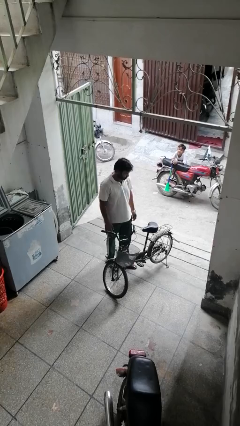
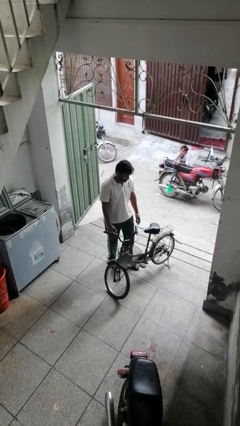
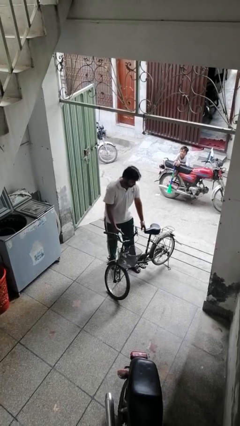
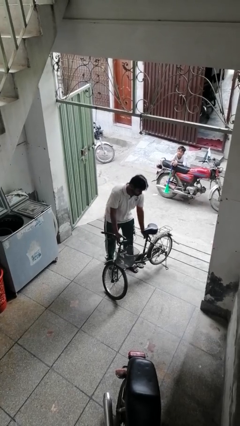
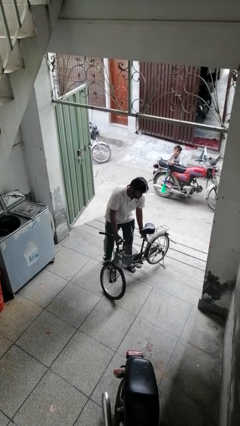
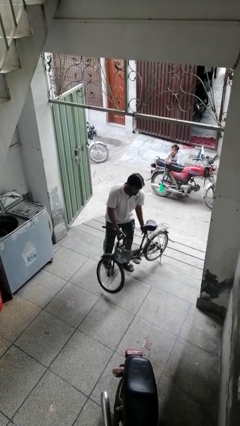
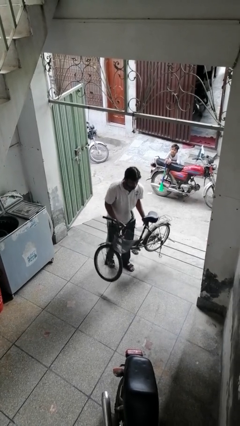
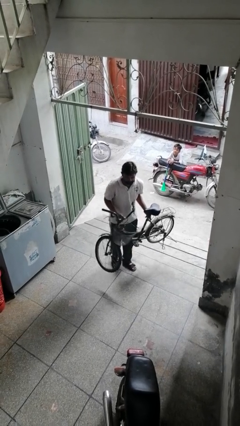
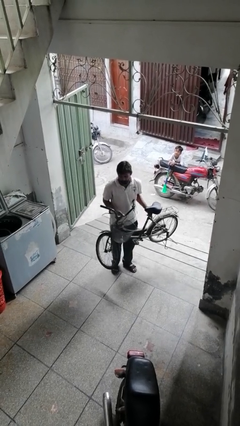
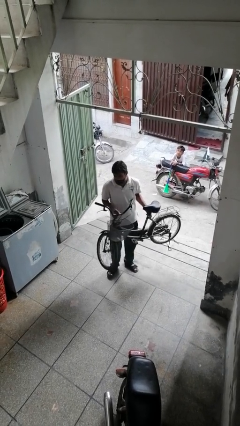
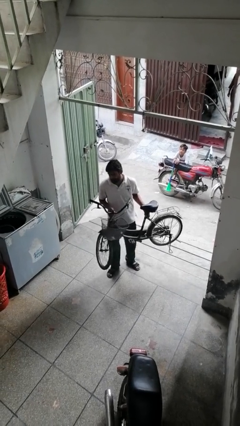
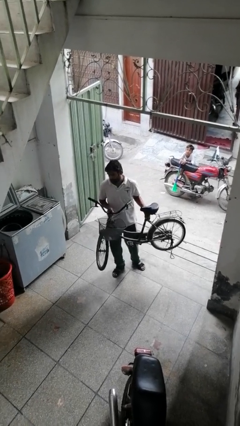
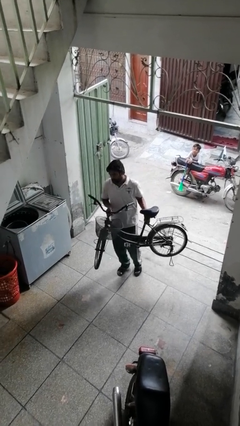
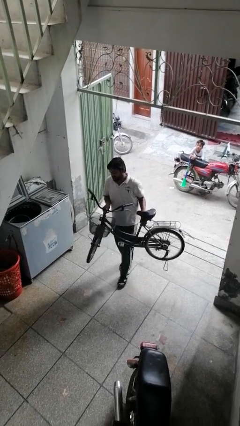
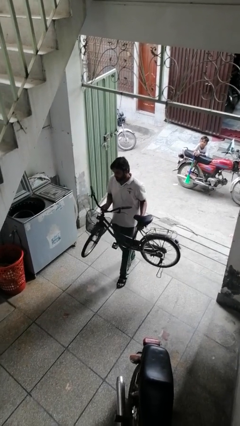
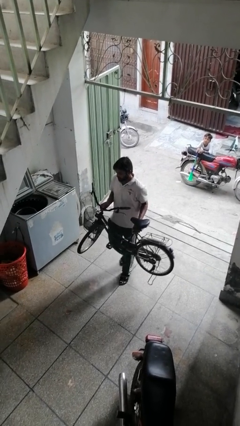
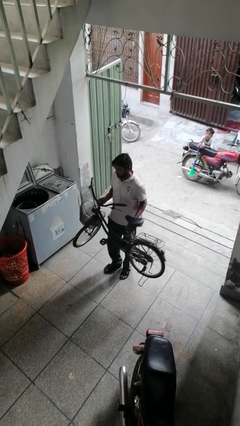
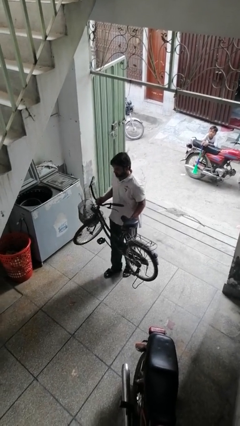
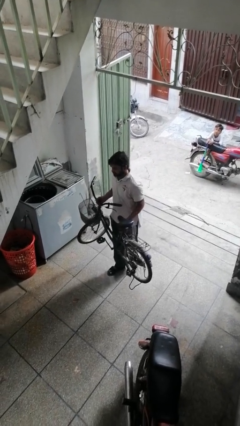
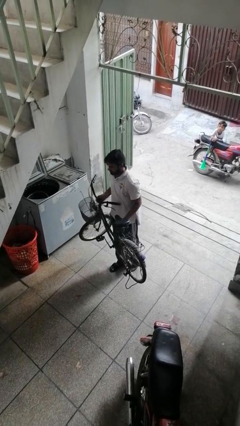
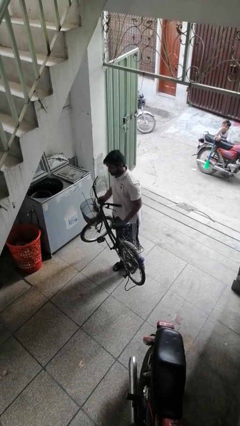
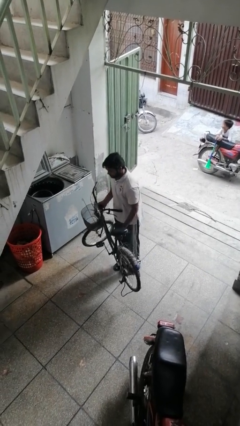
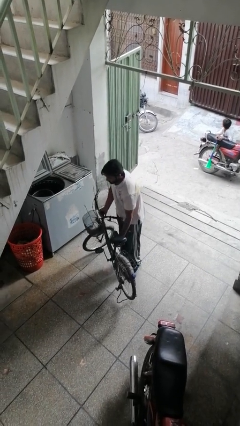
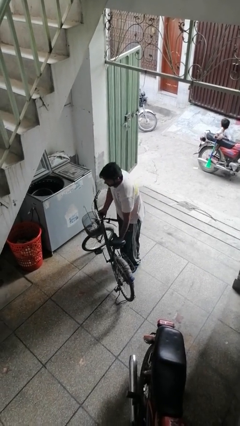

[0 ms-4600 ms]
person carries bicycle

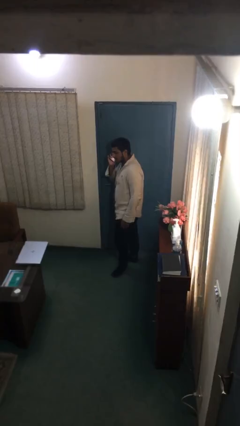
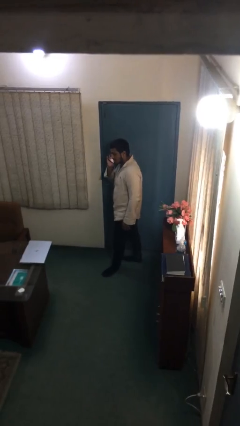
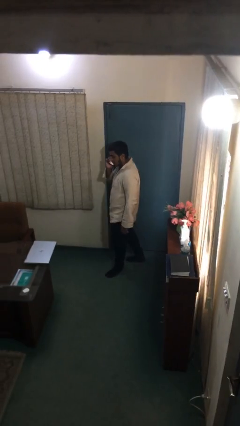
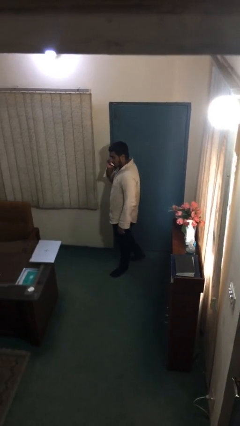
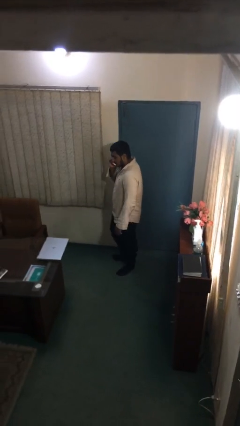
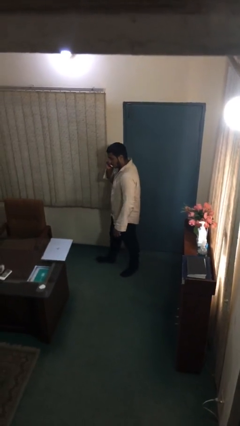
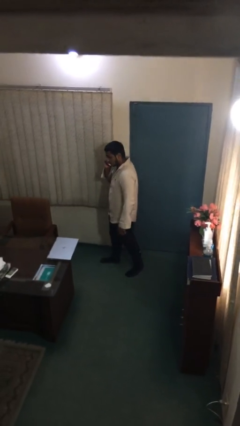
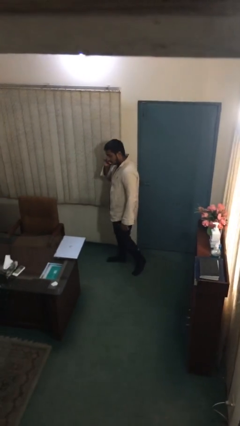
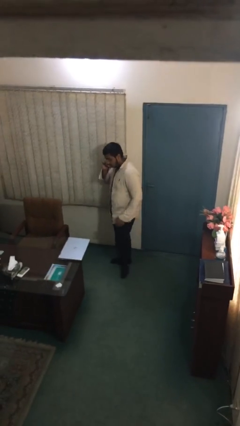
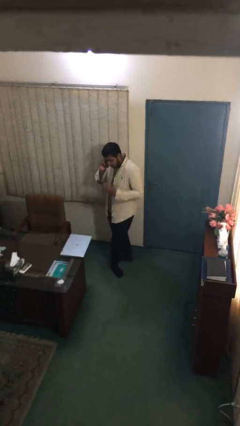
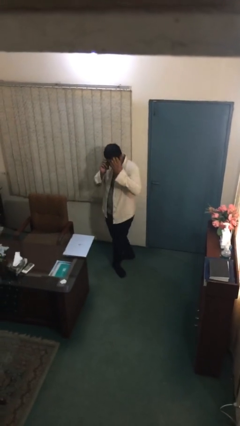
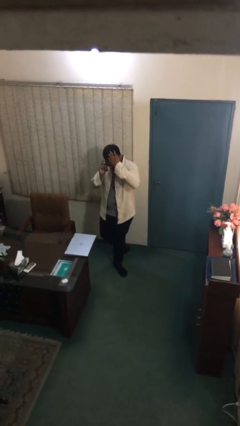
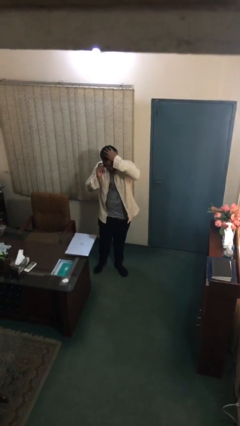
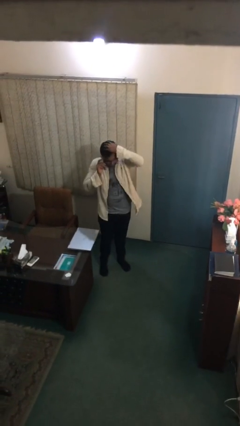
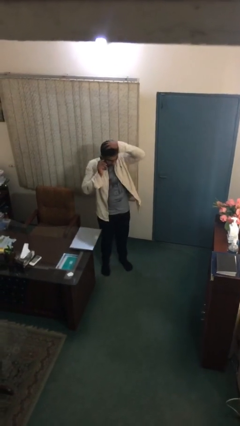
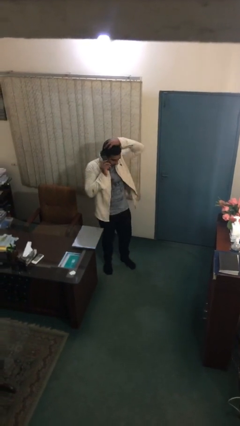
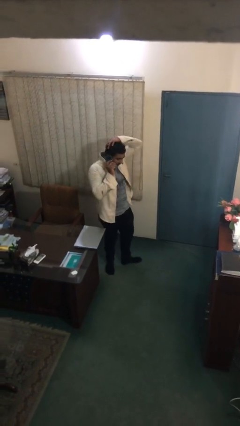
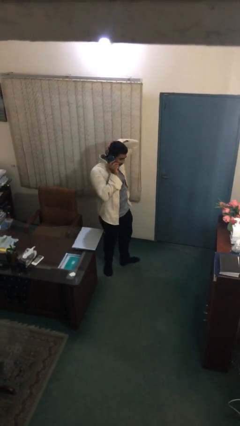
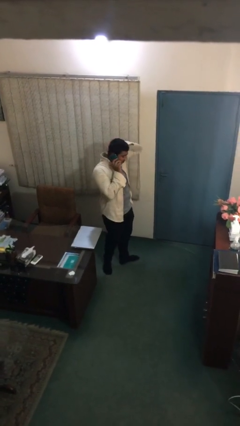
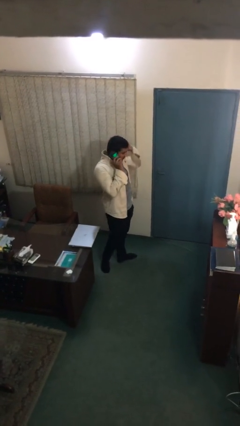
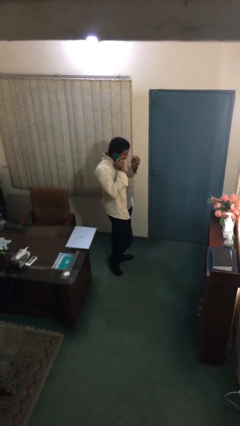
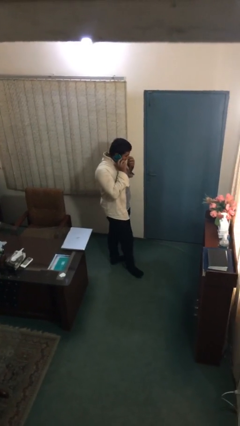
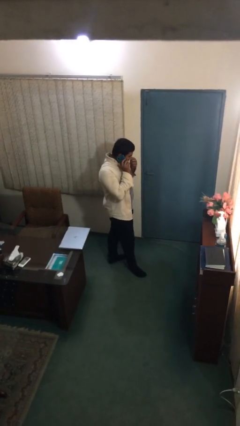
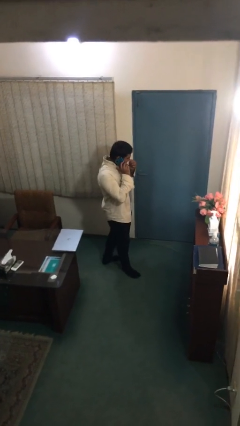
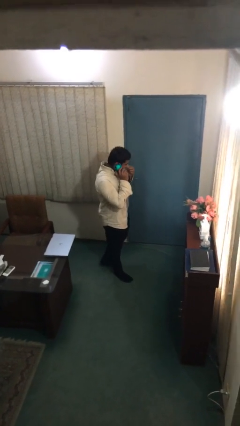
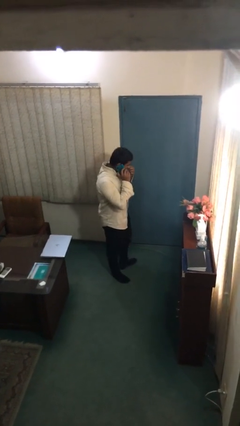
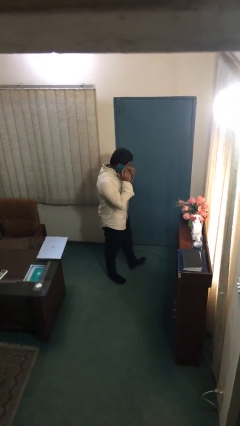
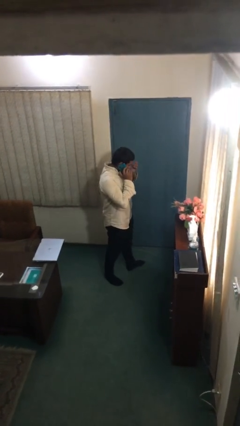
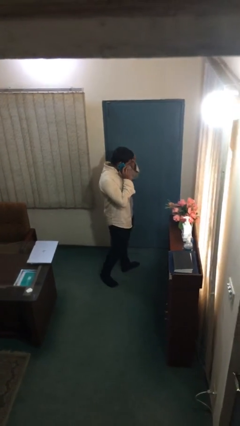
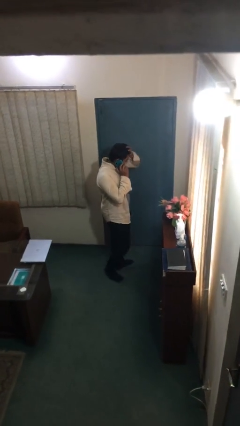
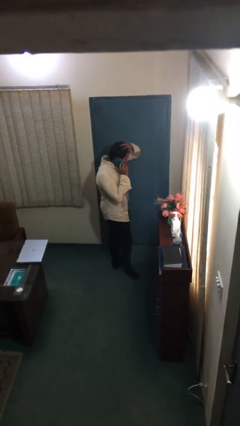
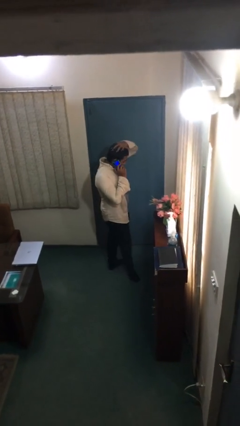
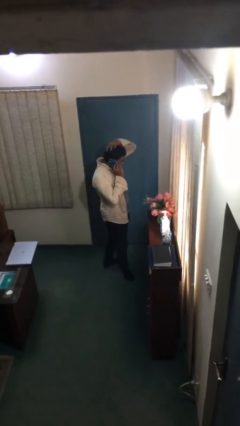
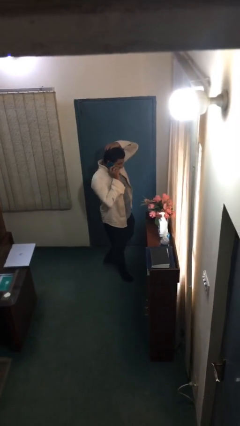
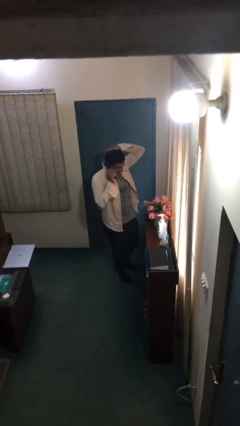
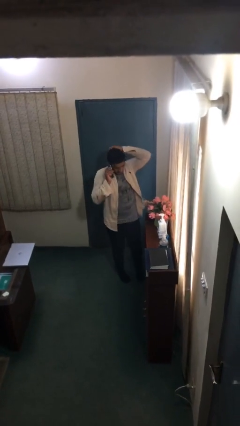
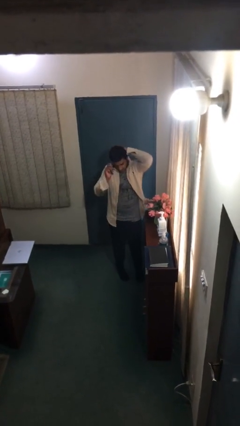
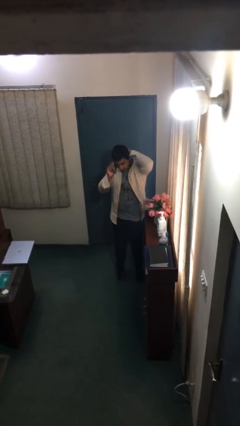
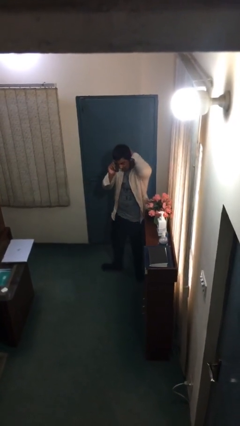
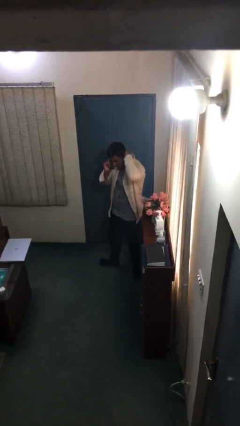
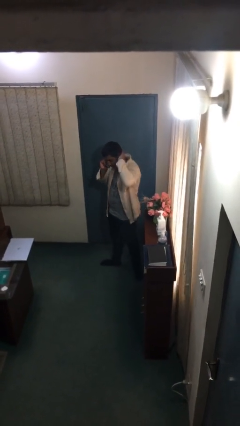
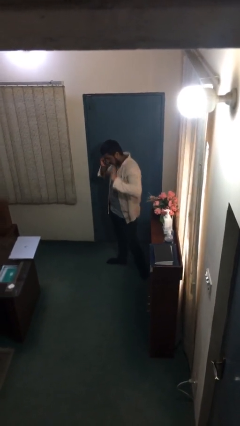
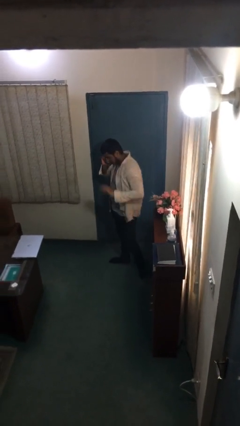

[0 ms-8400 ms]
person talks on phone

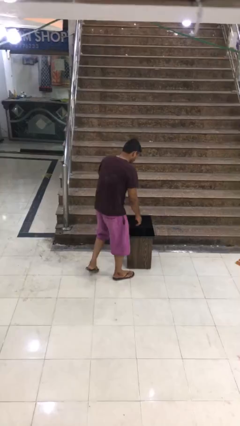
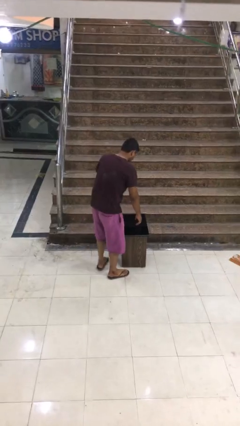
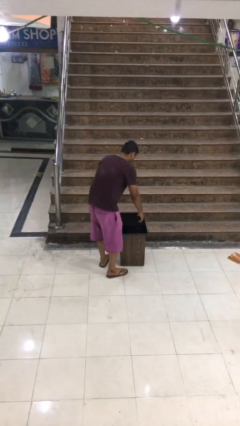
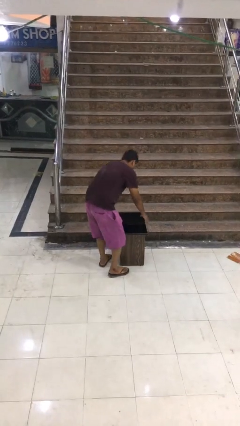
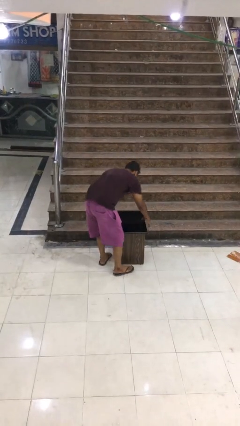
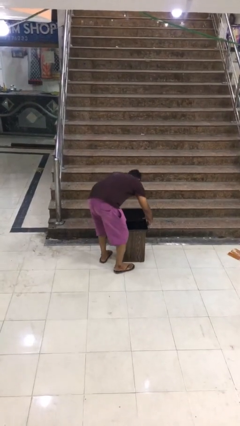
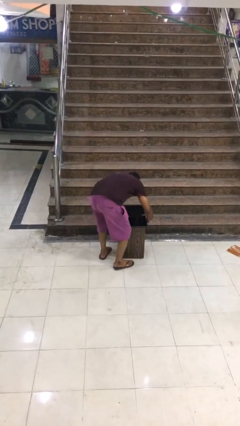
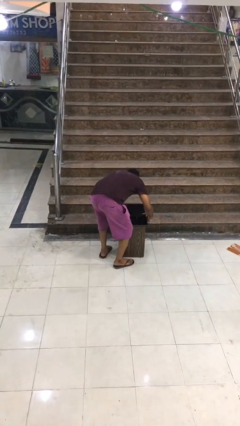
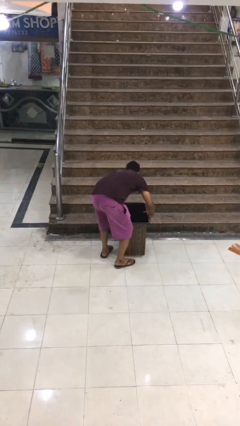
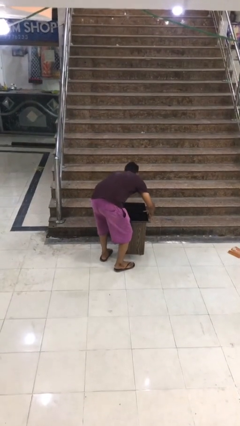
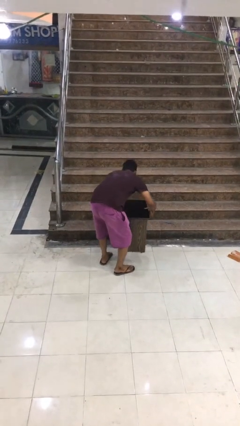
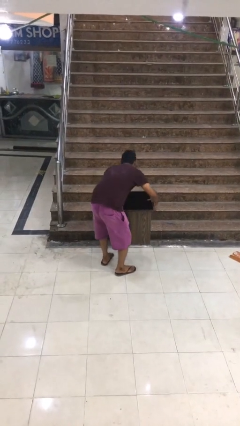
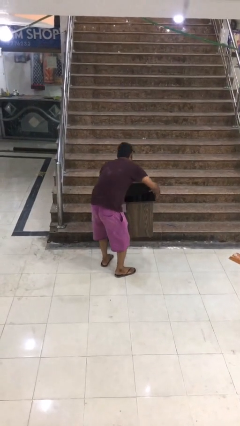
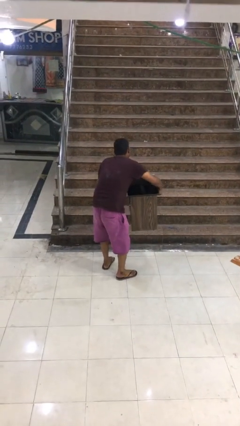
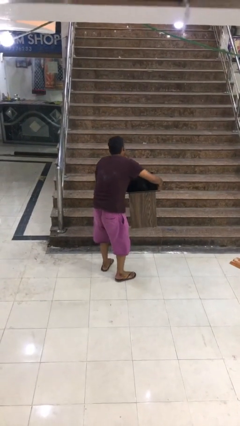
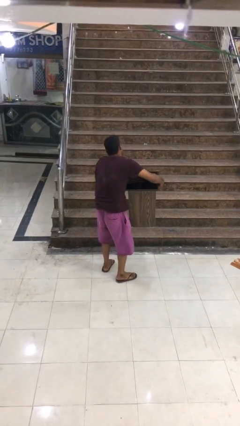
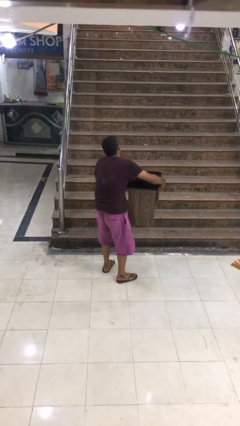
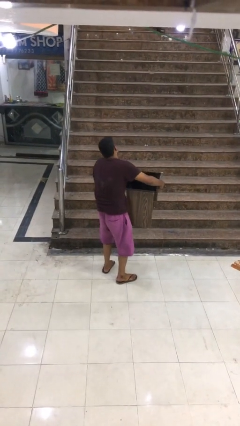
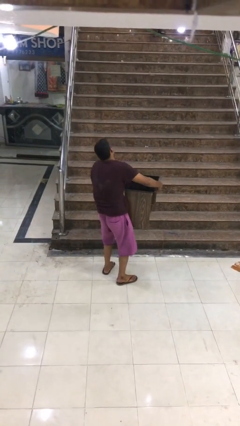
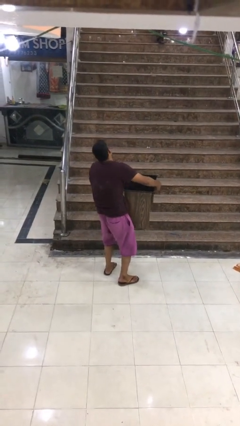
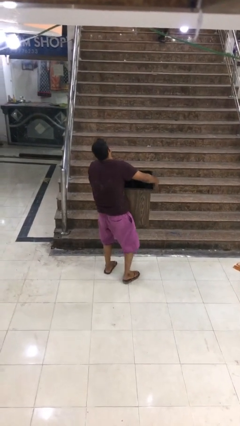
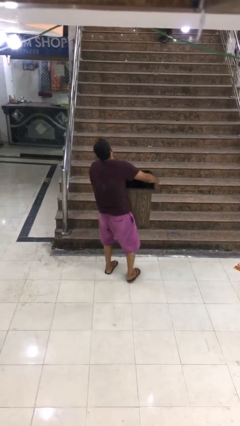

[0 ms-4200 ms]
person picks up object from floor

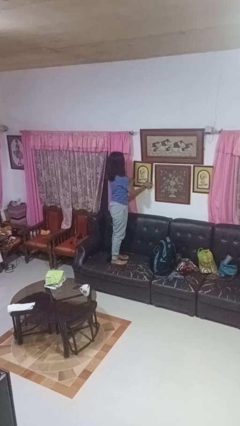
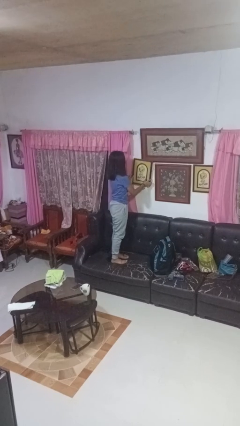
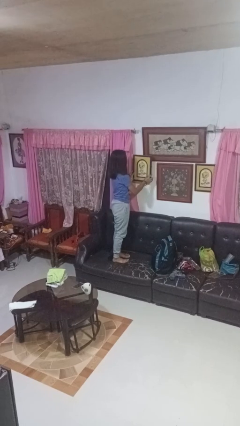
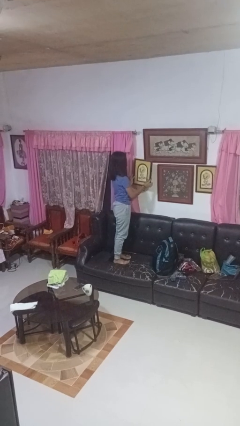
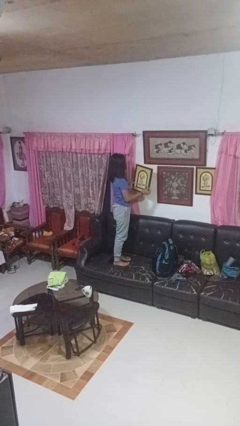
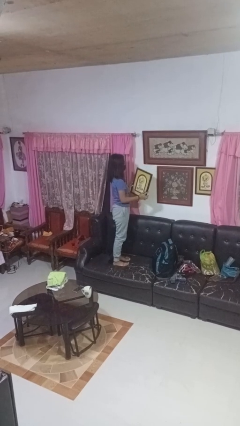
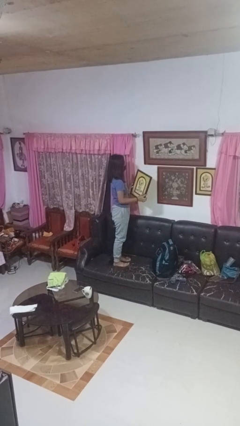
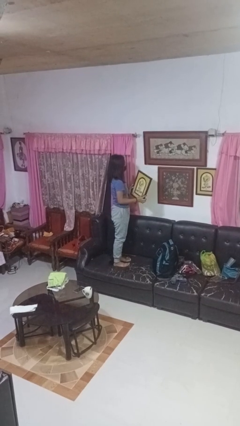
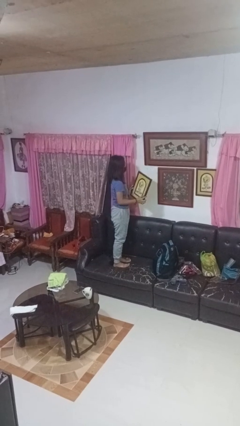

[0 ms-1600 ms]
person takes down picture frame
